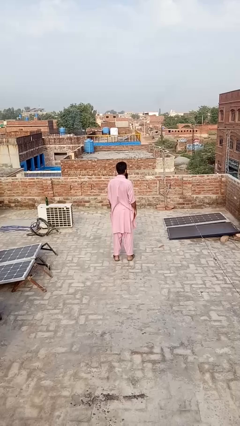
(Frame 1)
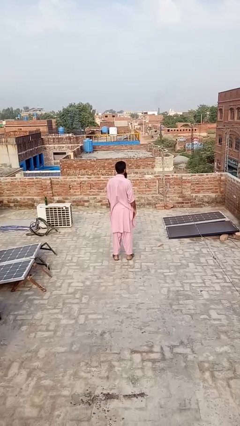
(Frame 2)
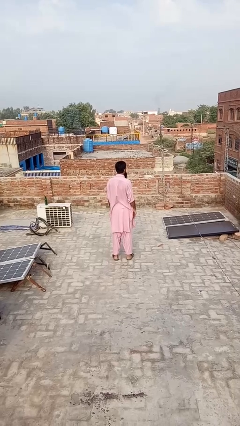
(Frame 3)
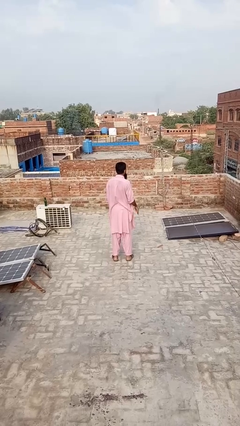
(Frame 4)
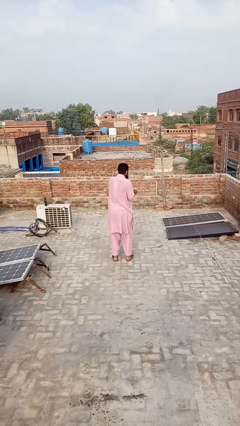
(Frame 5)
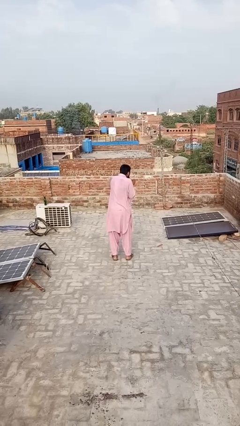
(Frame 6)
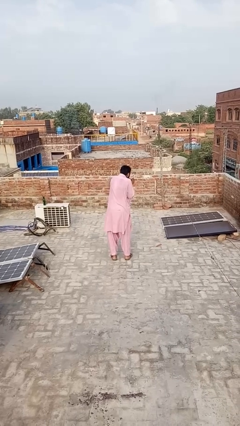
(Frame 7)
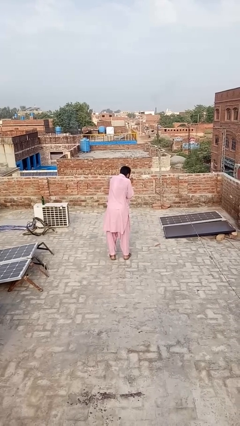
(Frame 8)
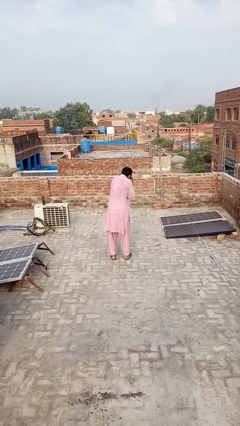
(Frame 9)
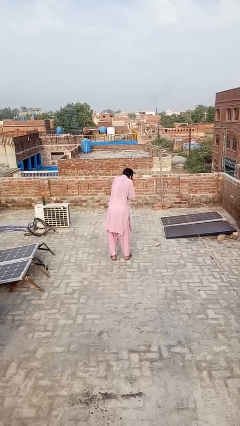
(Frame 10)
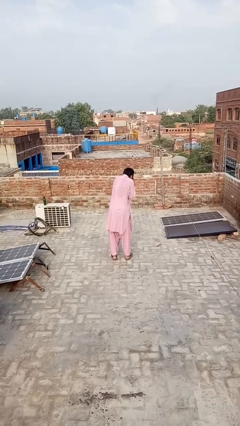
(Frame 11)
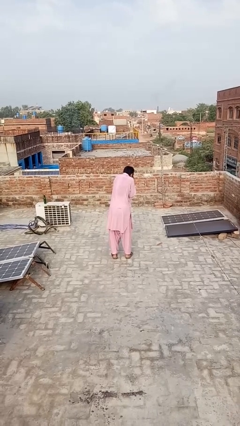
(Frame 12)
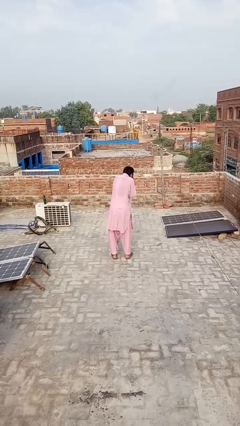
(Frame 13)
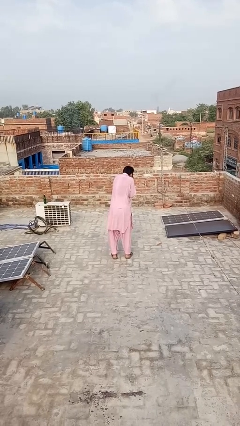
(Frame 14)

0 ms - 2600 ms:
person blows into hands

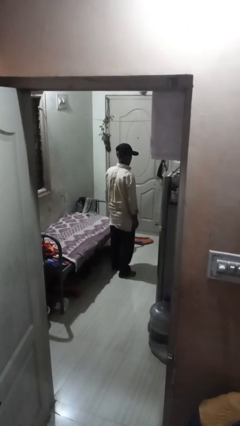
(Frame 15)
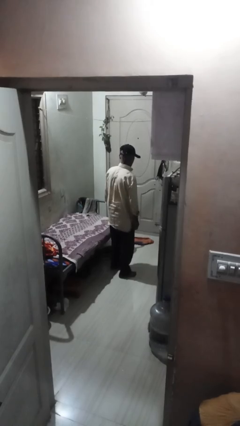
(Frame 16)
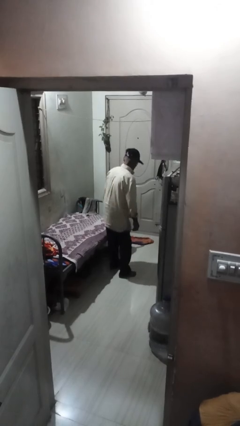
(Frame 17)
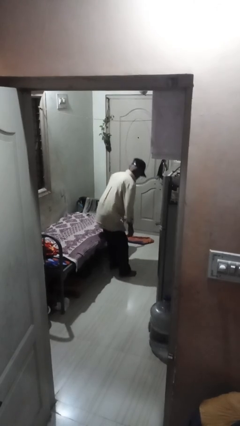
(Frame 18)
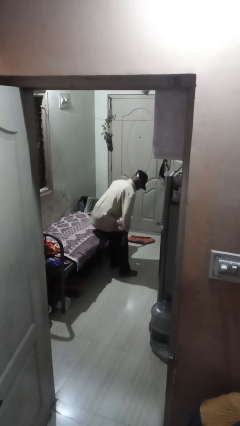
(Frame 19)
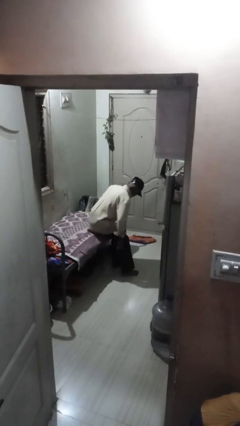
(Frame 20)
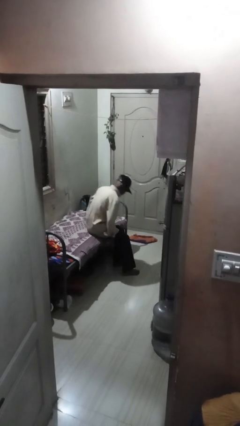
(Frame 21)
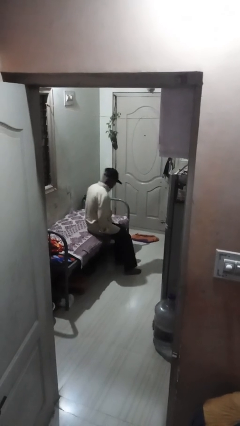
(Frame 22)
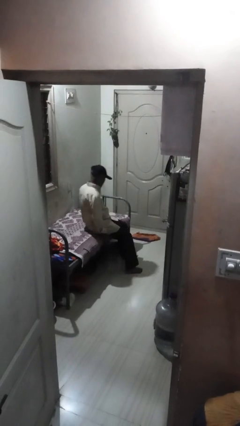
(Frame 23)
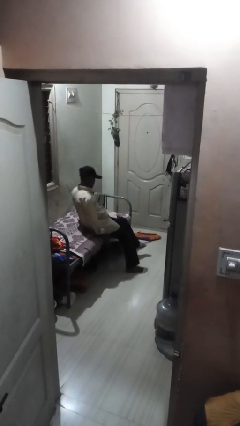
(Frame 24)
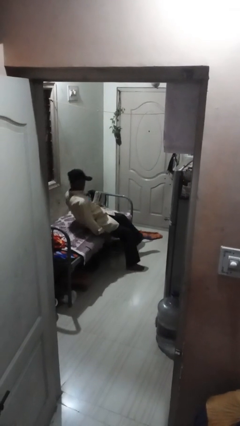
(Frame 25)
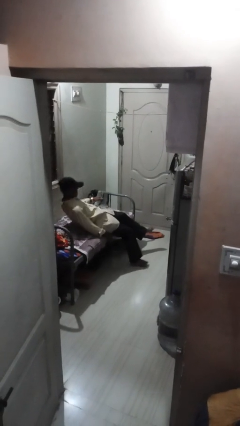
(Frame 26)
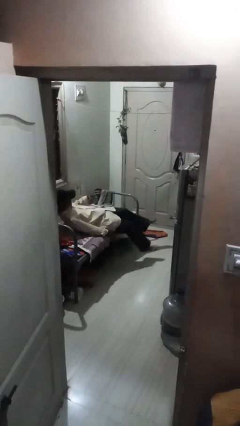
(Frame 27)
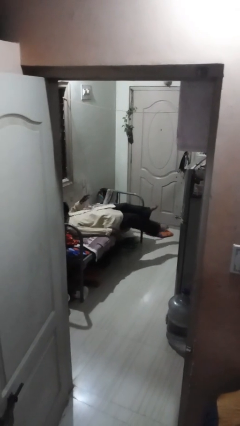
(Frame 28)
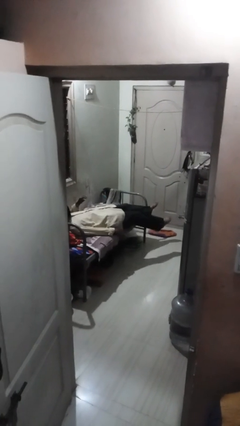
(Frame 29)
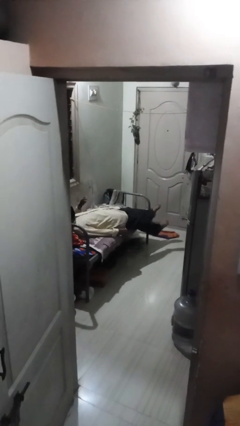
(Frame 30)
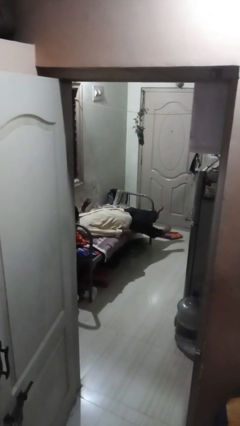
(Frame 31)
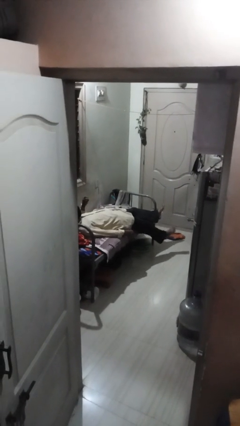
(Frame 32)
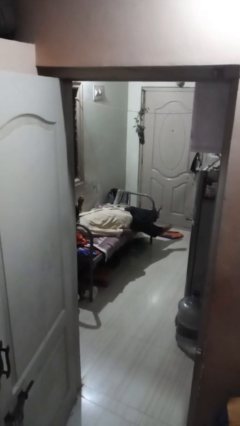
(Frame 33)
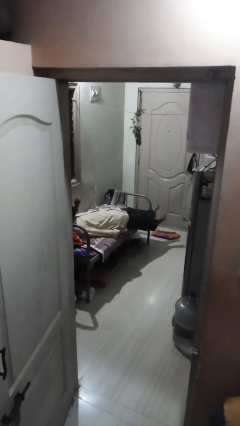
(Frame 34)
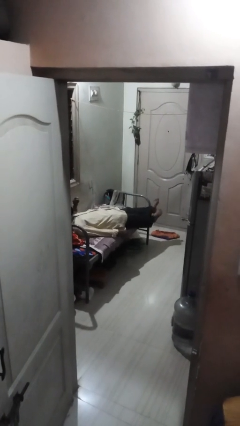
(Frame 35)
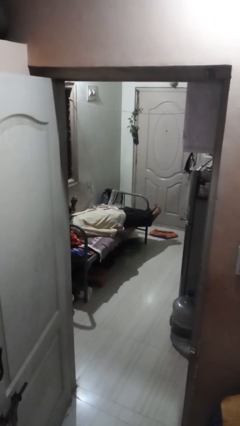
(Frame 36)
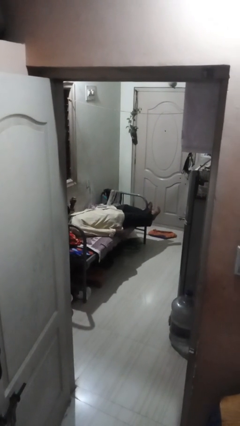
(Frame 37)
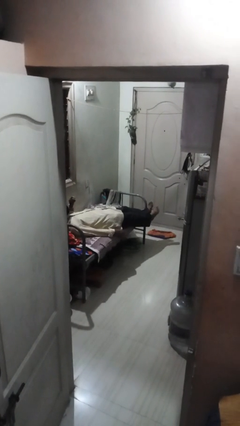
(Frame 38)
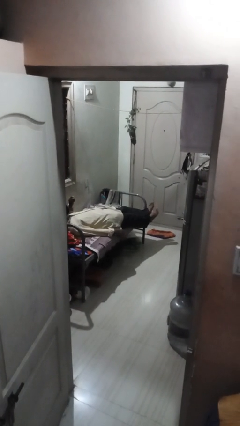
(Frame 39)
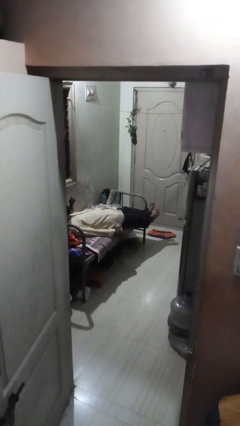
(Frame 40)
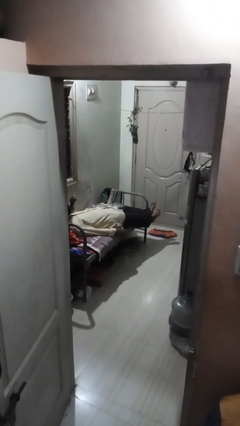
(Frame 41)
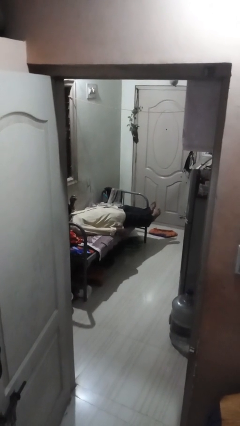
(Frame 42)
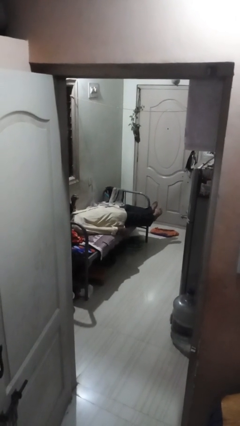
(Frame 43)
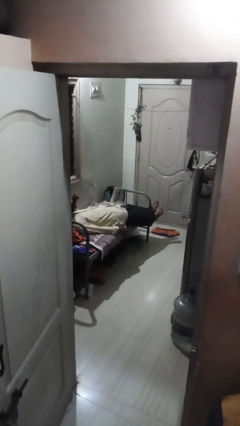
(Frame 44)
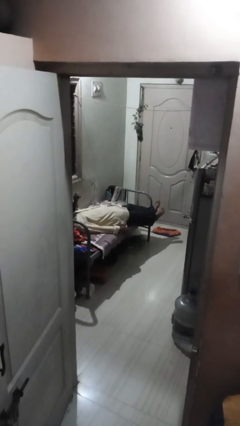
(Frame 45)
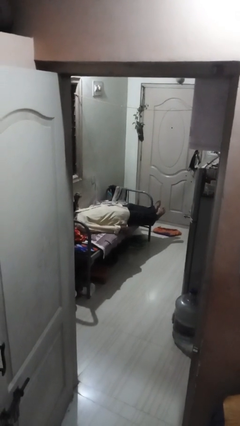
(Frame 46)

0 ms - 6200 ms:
person lies down on bed

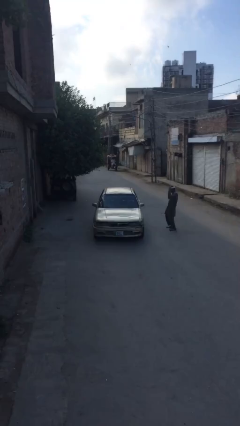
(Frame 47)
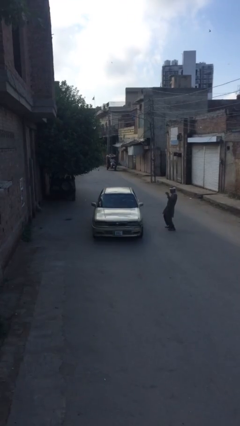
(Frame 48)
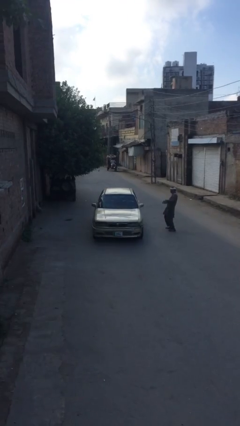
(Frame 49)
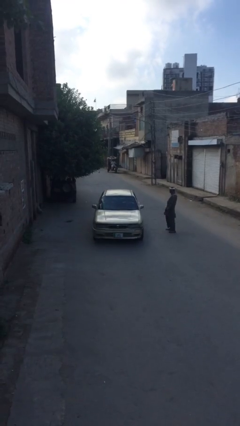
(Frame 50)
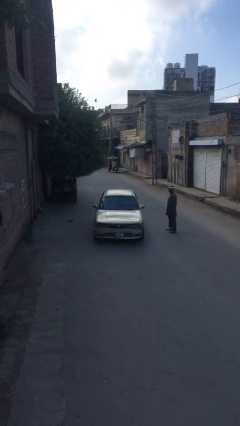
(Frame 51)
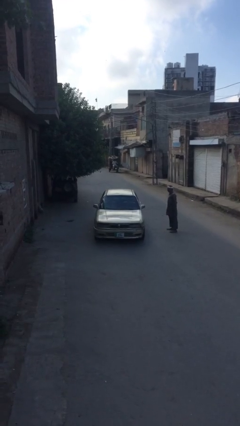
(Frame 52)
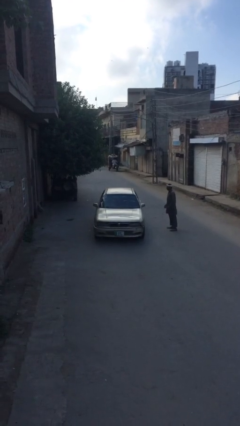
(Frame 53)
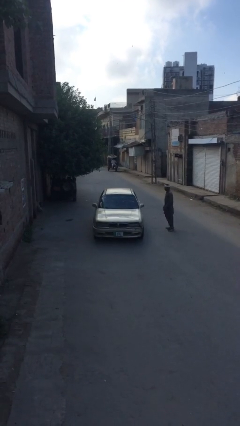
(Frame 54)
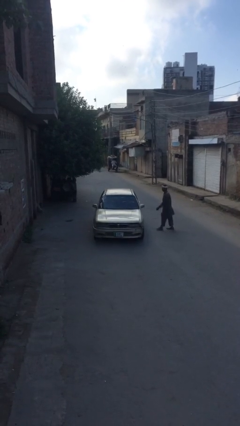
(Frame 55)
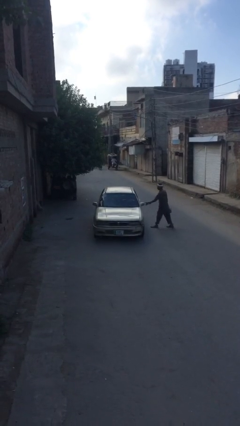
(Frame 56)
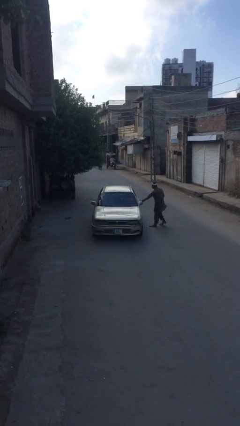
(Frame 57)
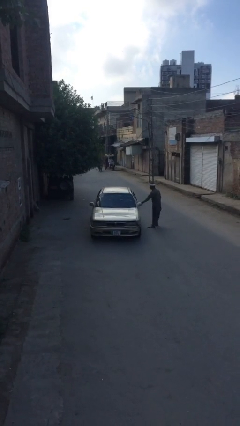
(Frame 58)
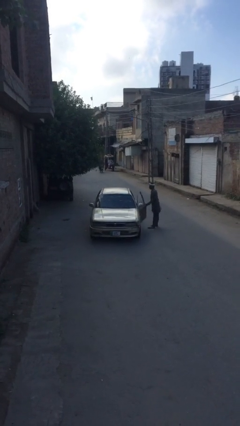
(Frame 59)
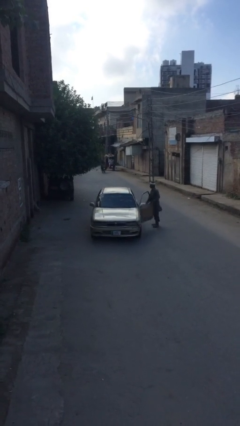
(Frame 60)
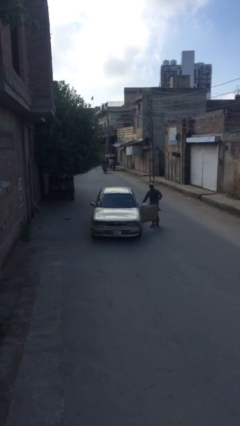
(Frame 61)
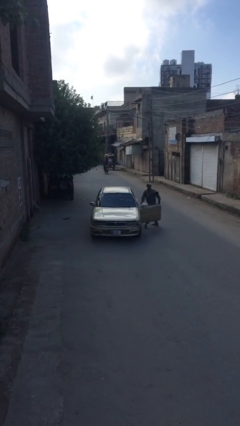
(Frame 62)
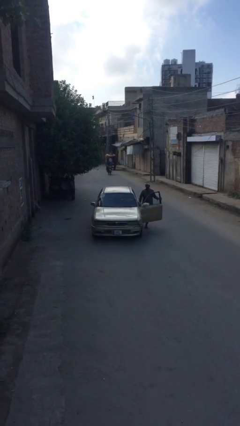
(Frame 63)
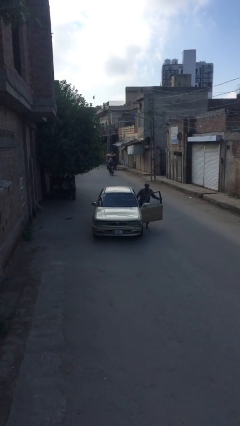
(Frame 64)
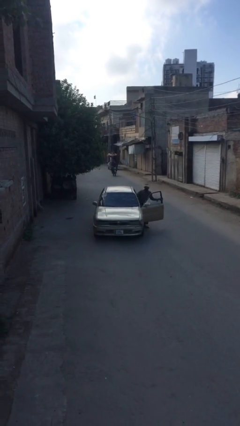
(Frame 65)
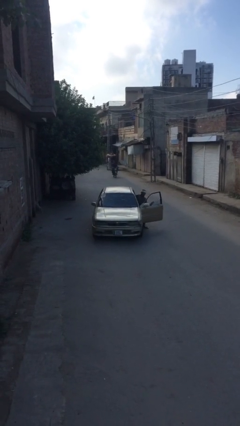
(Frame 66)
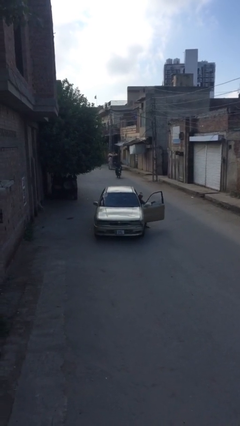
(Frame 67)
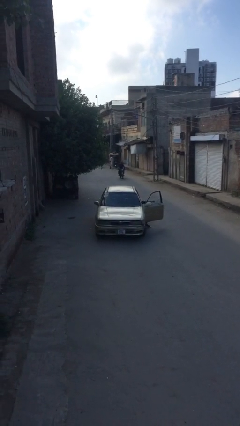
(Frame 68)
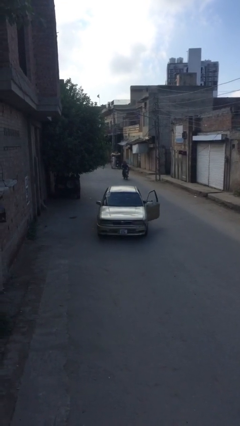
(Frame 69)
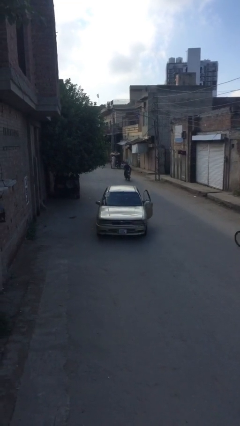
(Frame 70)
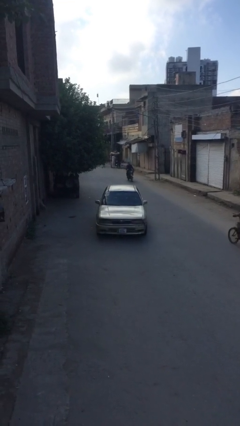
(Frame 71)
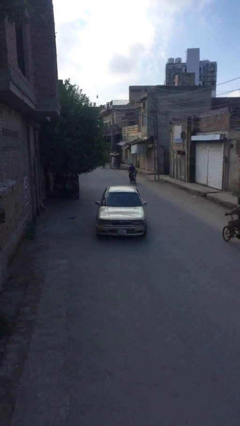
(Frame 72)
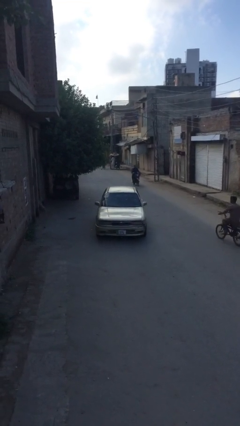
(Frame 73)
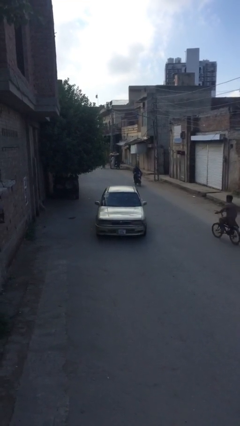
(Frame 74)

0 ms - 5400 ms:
car picks up person

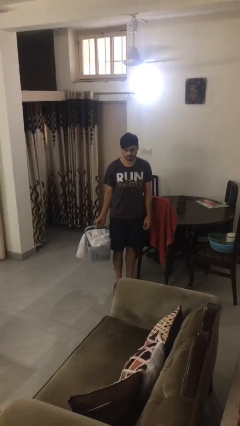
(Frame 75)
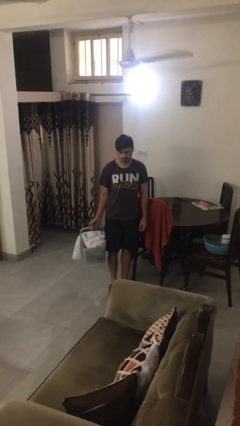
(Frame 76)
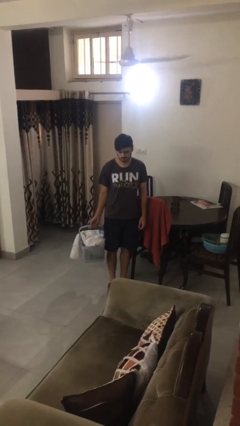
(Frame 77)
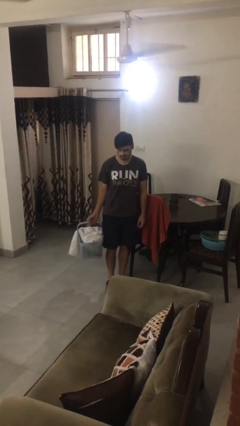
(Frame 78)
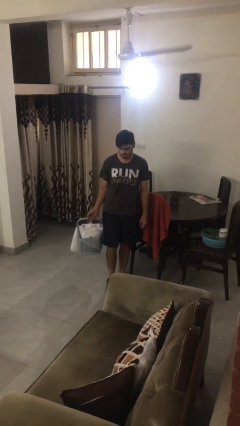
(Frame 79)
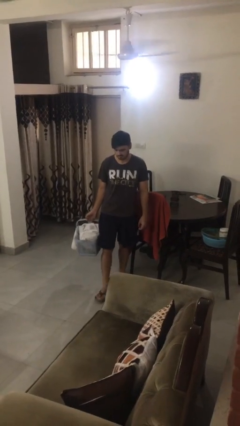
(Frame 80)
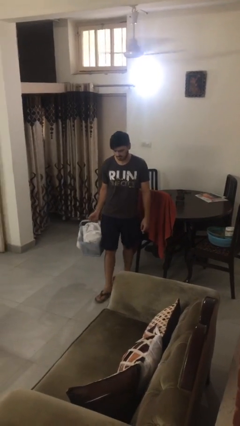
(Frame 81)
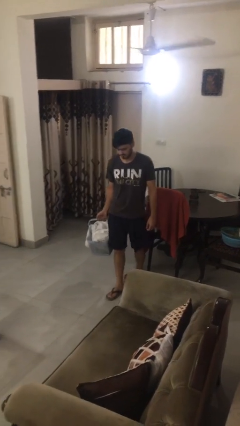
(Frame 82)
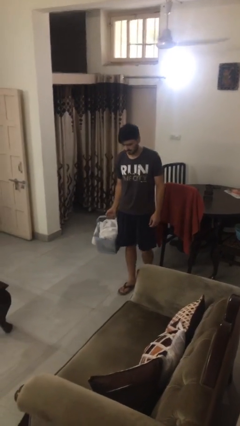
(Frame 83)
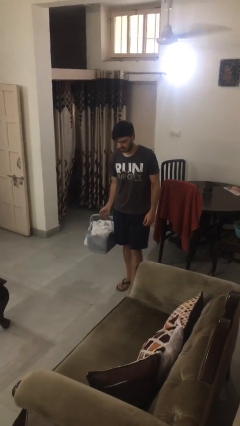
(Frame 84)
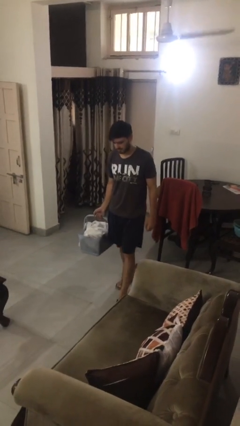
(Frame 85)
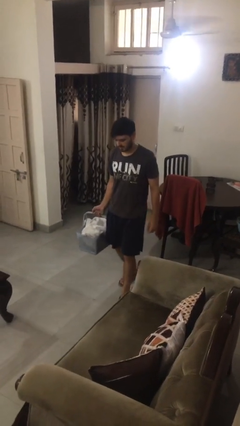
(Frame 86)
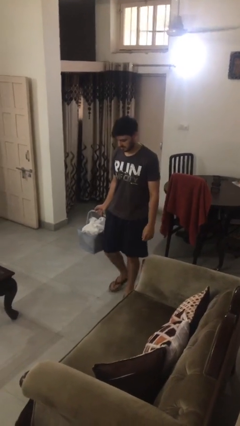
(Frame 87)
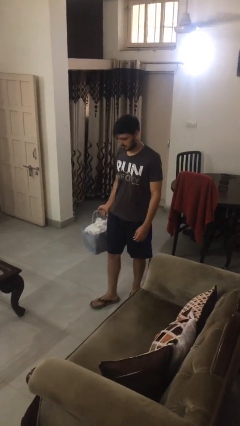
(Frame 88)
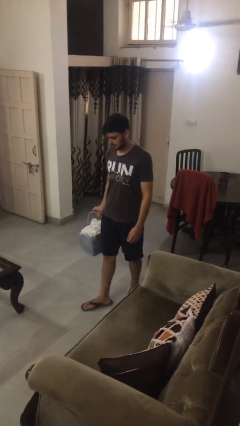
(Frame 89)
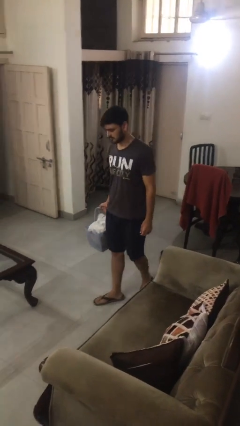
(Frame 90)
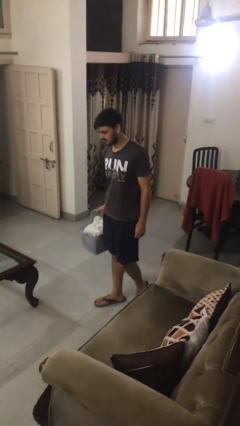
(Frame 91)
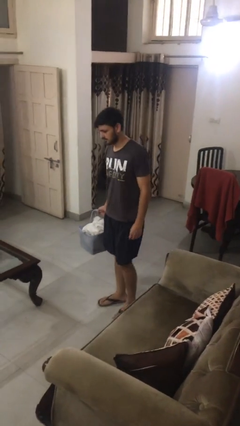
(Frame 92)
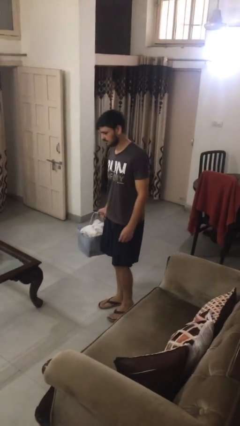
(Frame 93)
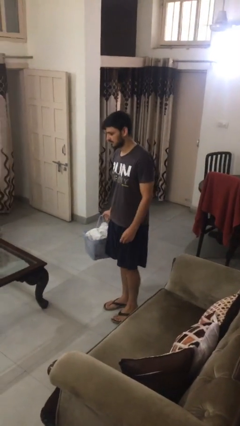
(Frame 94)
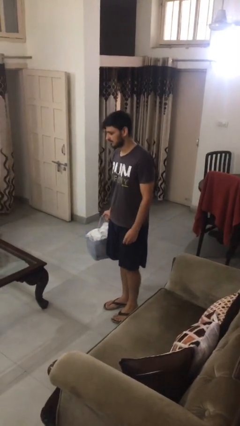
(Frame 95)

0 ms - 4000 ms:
person carries laundry basket

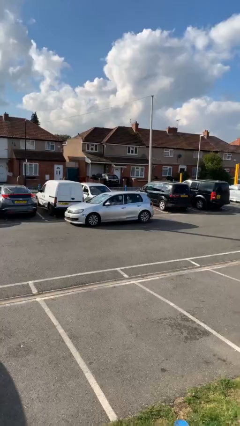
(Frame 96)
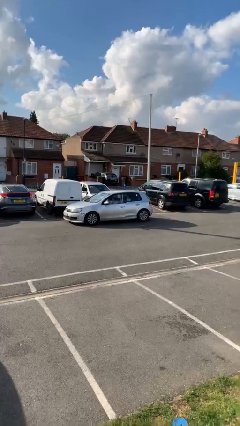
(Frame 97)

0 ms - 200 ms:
car drops off person
